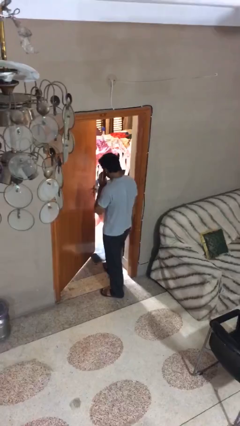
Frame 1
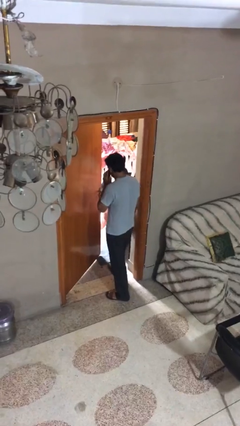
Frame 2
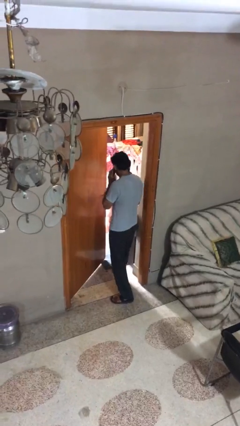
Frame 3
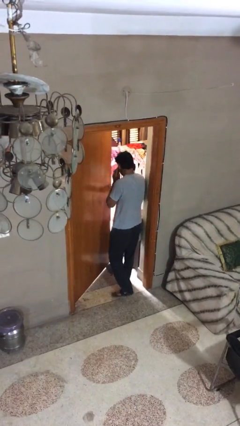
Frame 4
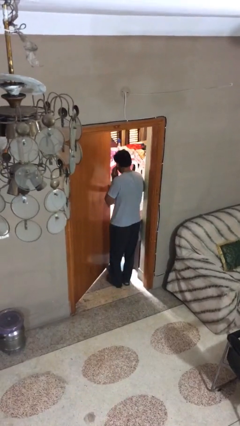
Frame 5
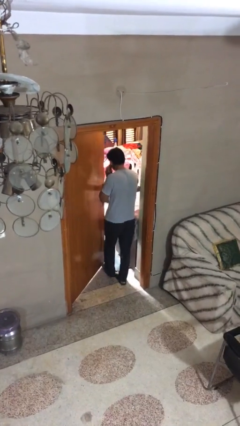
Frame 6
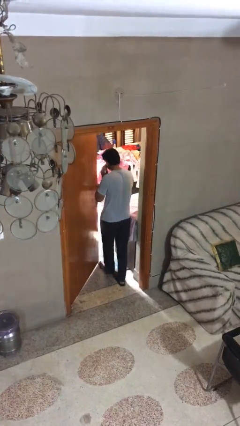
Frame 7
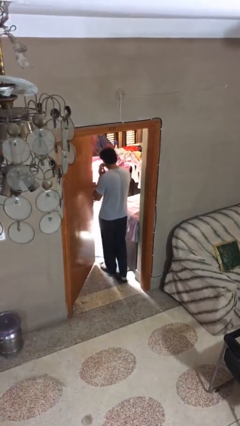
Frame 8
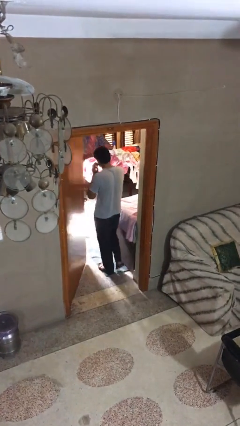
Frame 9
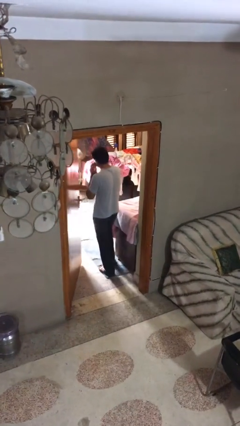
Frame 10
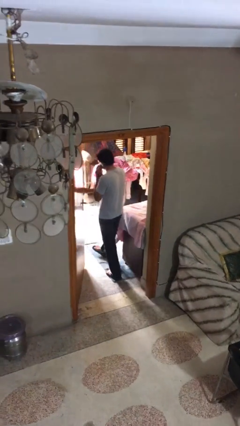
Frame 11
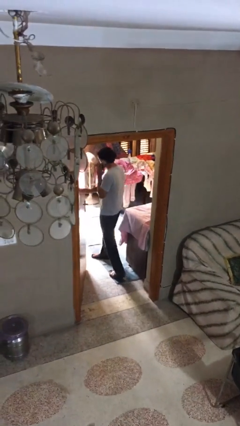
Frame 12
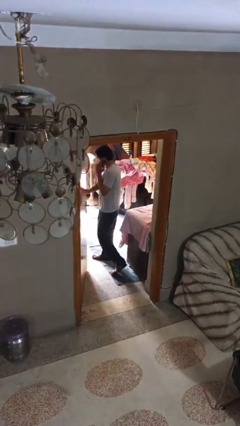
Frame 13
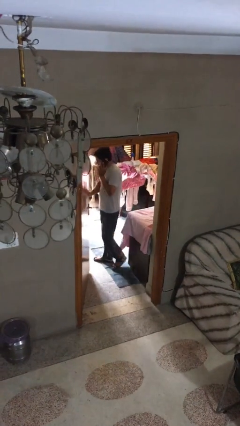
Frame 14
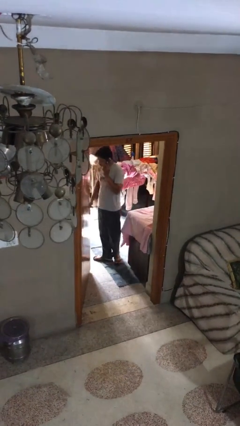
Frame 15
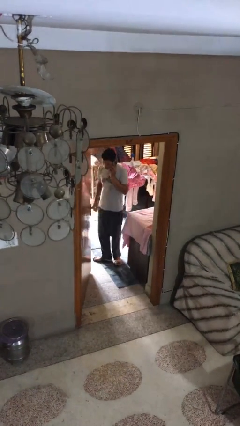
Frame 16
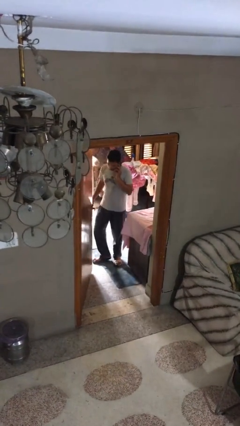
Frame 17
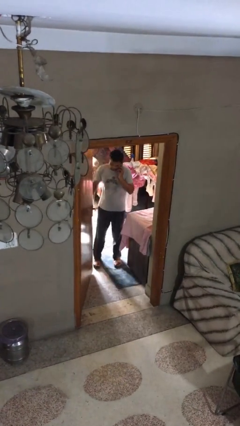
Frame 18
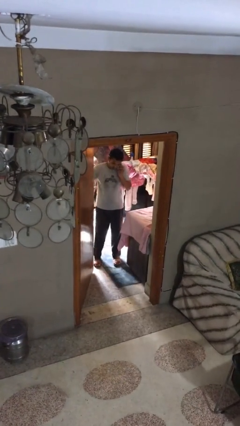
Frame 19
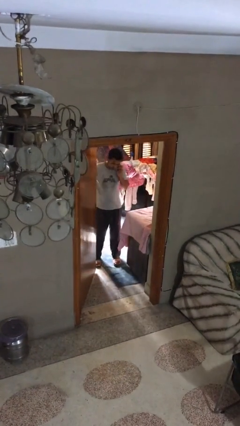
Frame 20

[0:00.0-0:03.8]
person exits scene through structure

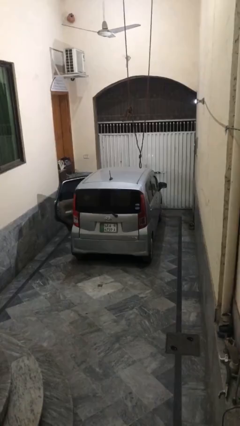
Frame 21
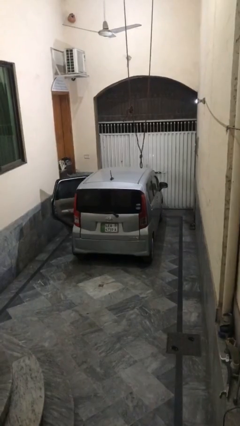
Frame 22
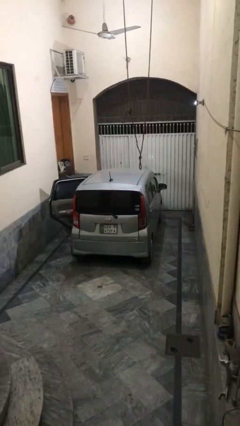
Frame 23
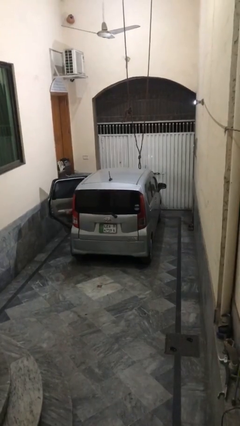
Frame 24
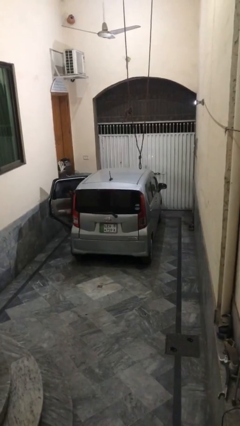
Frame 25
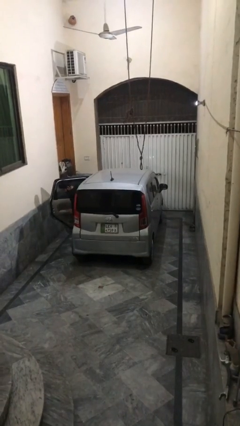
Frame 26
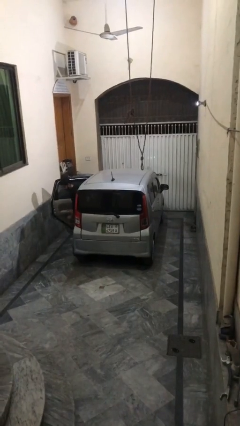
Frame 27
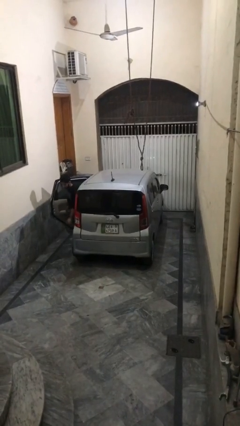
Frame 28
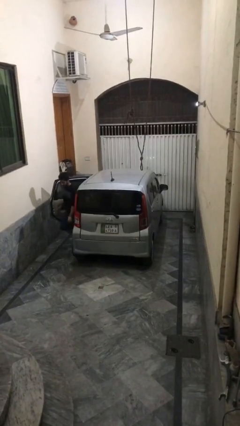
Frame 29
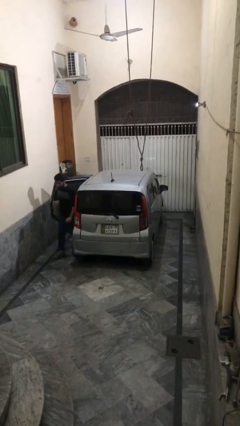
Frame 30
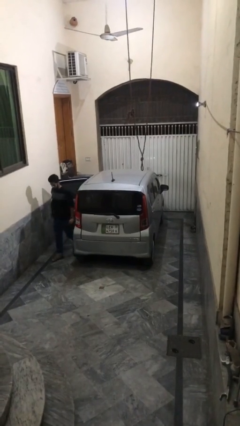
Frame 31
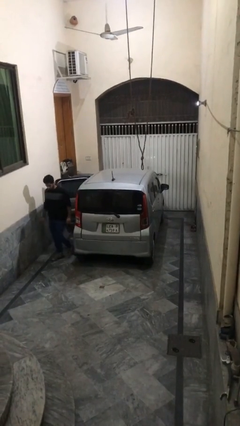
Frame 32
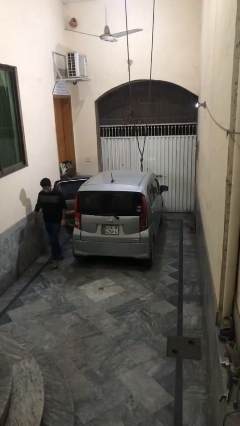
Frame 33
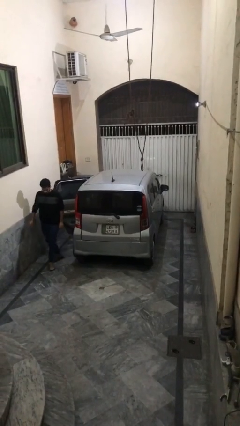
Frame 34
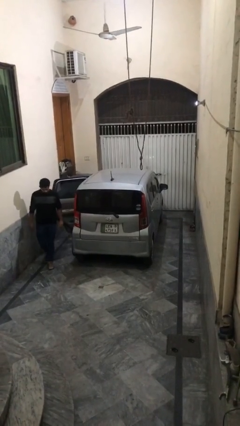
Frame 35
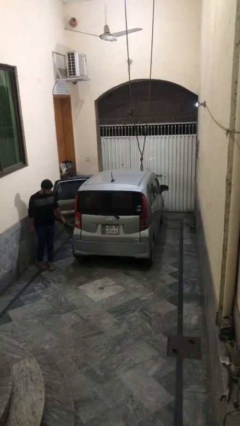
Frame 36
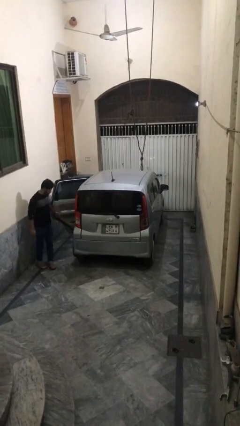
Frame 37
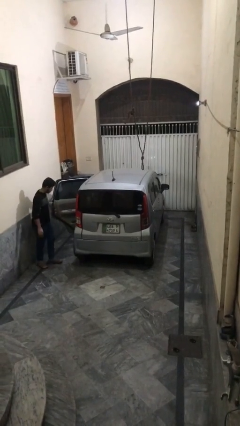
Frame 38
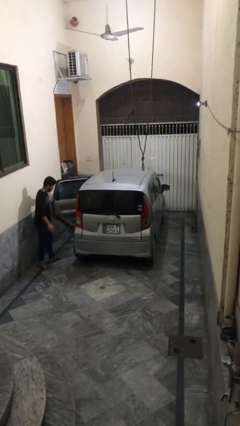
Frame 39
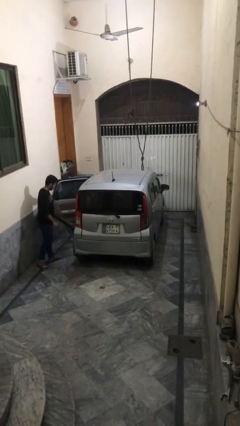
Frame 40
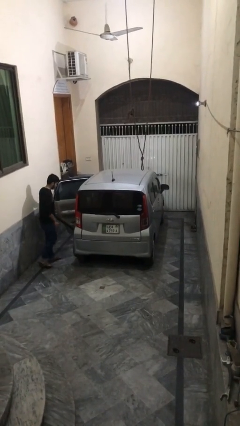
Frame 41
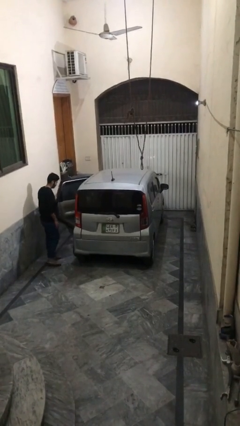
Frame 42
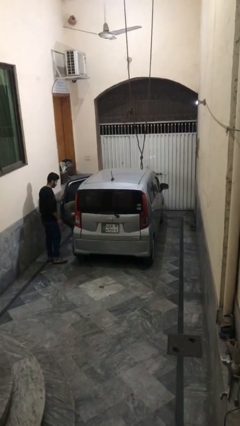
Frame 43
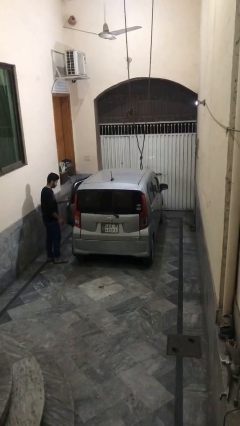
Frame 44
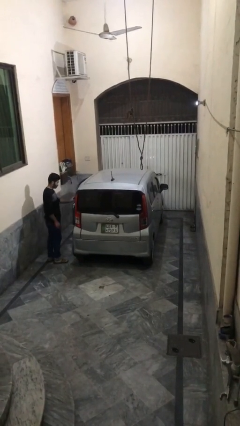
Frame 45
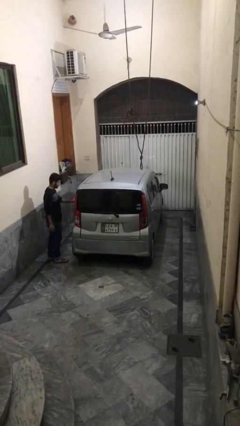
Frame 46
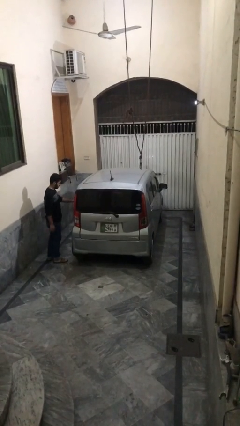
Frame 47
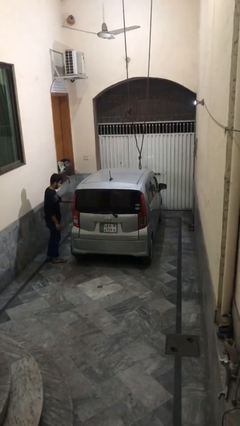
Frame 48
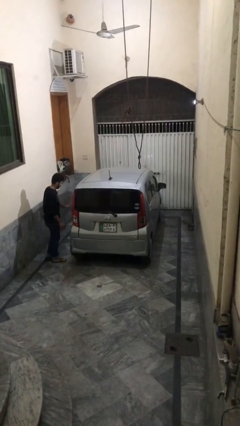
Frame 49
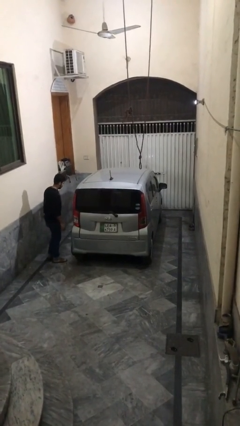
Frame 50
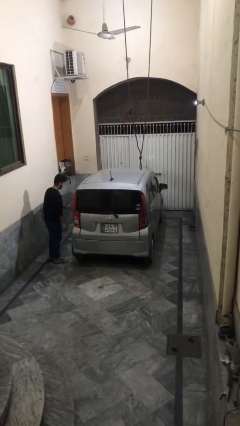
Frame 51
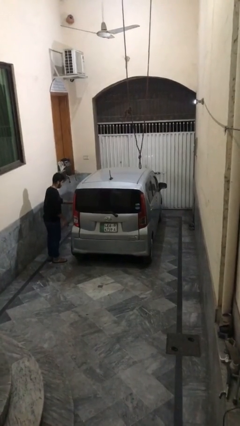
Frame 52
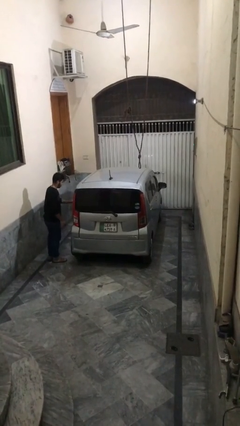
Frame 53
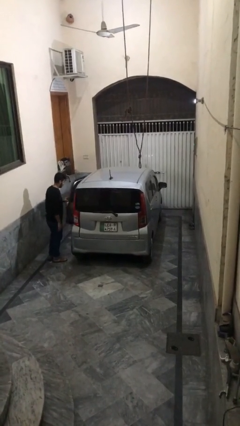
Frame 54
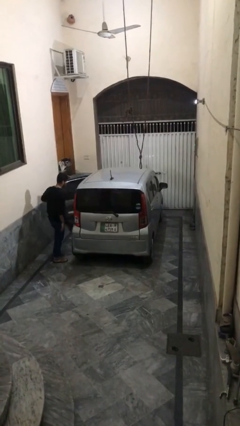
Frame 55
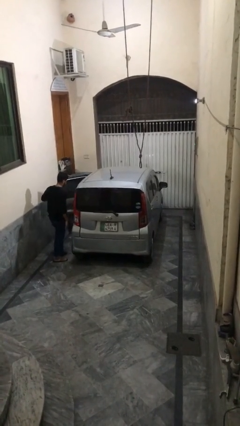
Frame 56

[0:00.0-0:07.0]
car drops off person

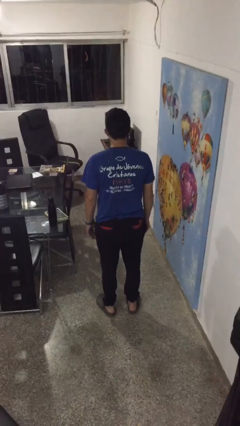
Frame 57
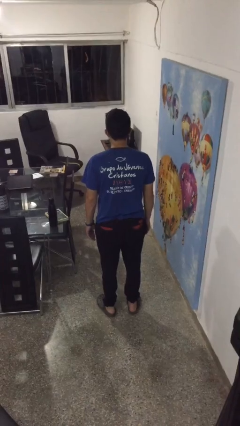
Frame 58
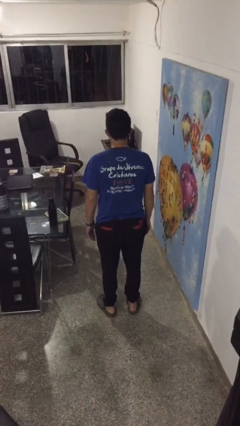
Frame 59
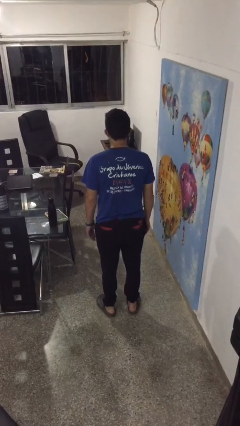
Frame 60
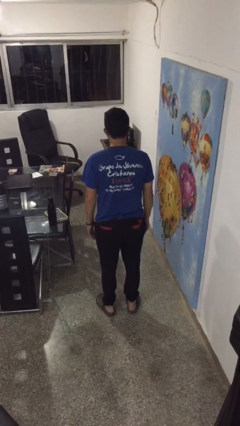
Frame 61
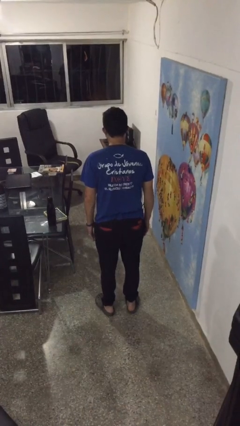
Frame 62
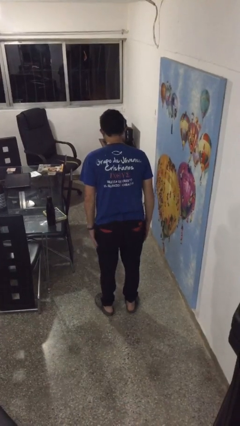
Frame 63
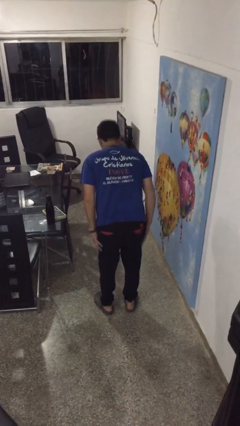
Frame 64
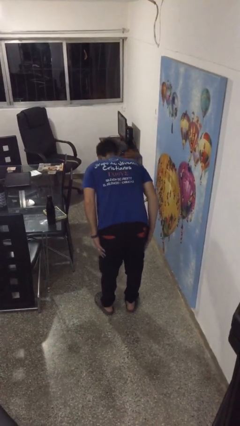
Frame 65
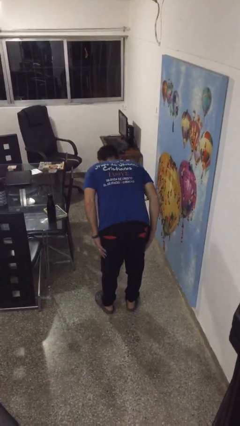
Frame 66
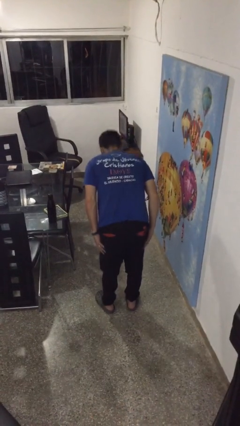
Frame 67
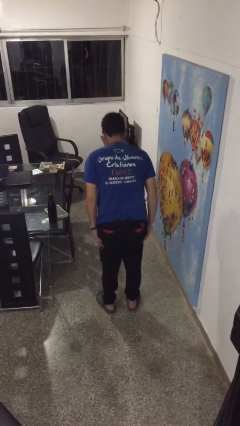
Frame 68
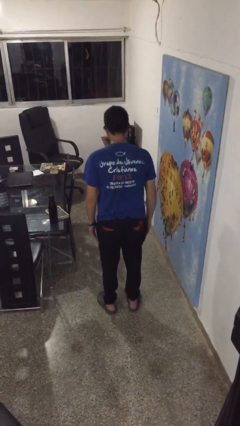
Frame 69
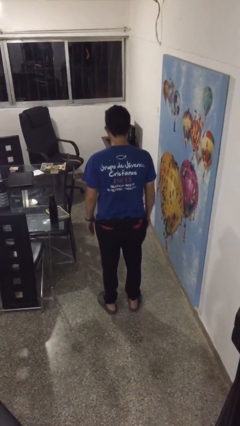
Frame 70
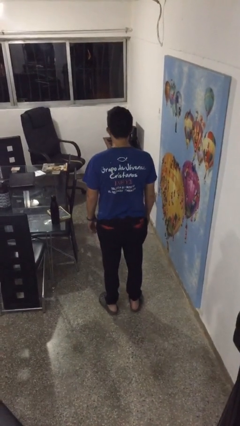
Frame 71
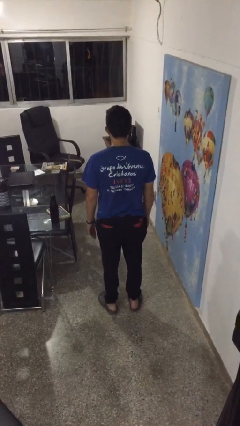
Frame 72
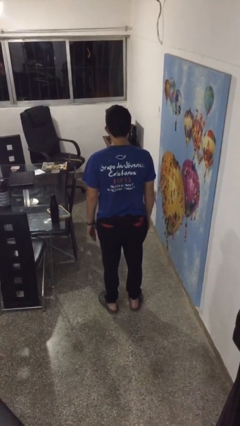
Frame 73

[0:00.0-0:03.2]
person bows

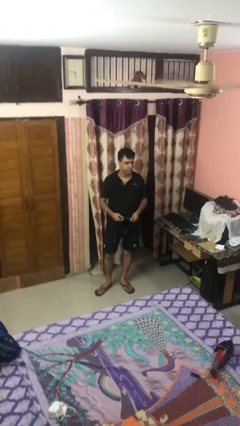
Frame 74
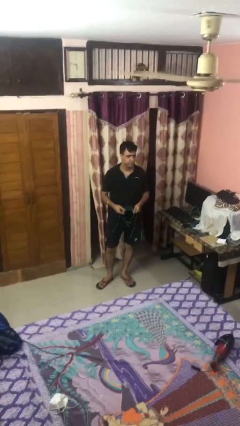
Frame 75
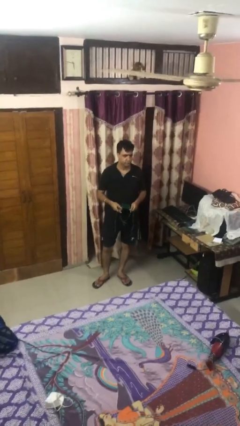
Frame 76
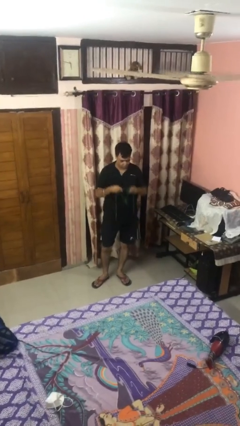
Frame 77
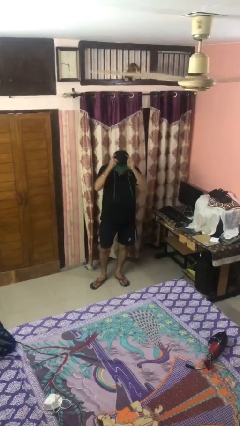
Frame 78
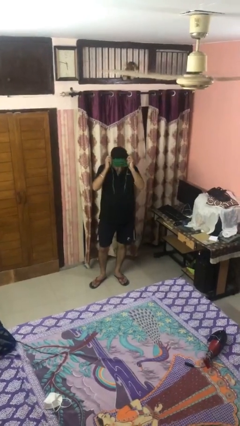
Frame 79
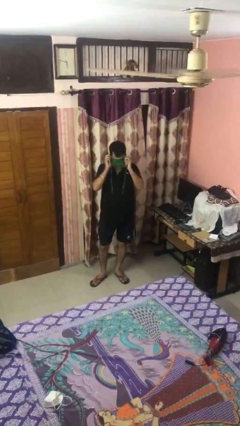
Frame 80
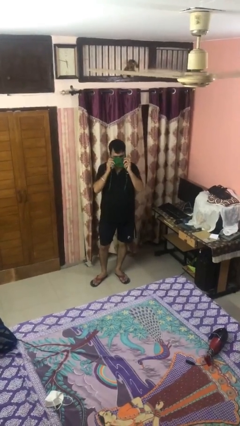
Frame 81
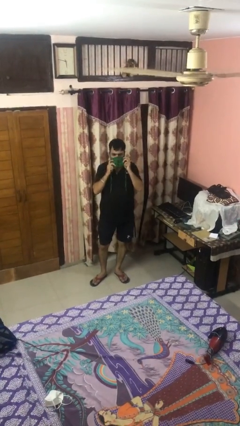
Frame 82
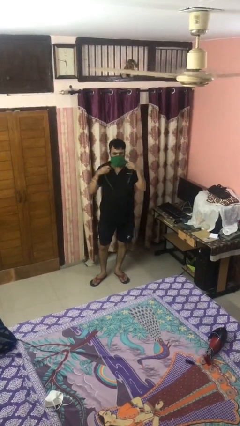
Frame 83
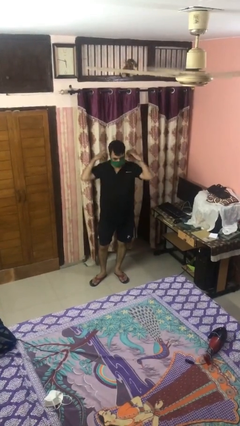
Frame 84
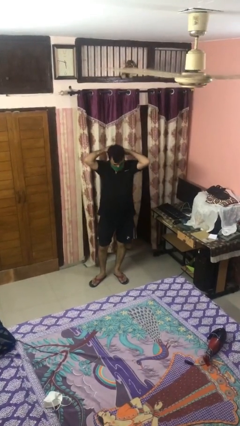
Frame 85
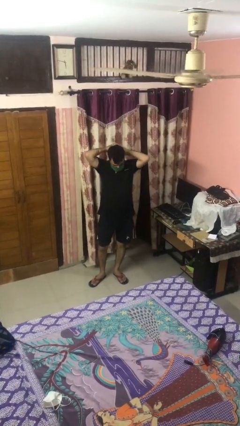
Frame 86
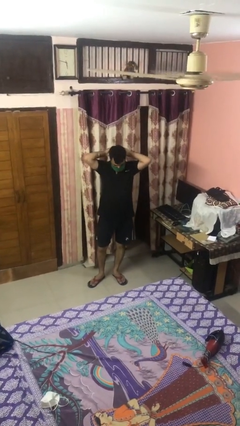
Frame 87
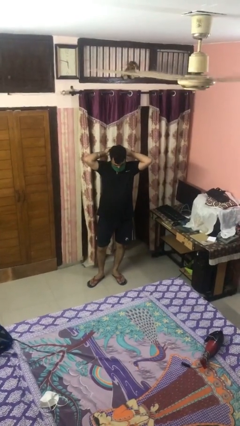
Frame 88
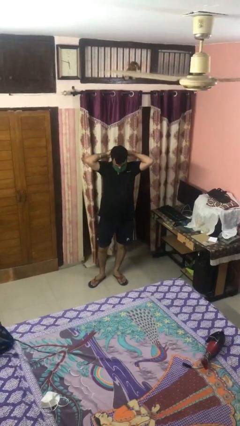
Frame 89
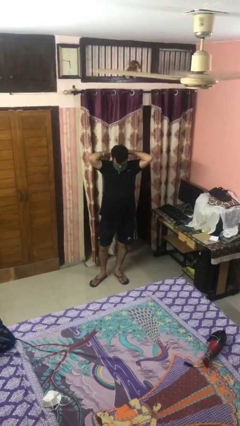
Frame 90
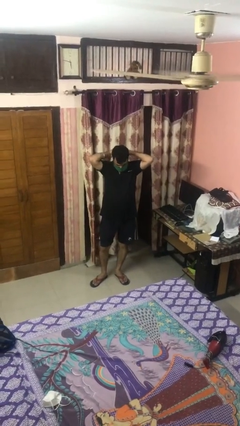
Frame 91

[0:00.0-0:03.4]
person puts on facemask
